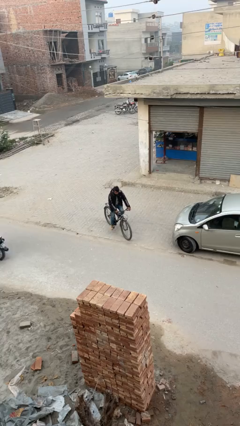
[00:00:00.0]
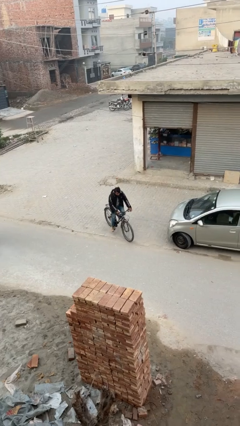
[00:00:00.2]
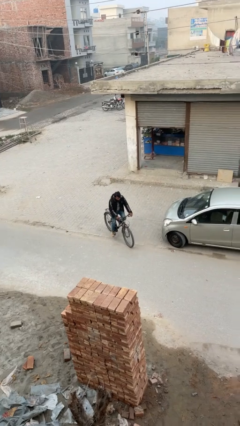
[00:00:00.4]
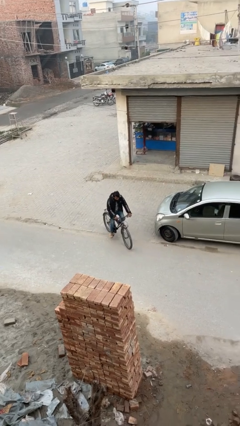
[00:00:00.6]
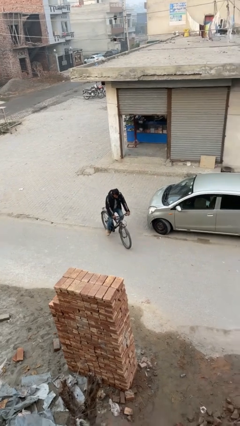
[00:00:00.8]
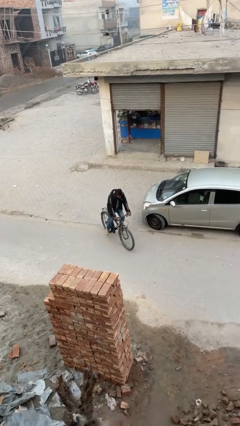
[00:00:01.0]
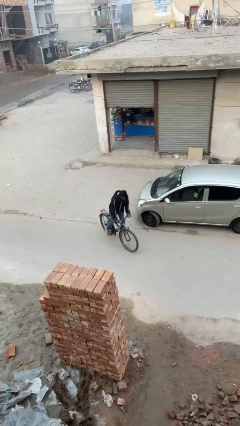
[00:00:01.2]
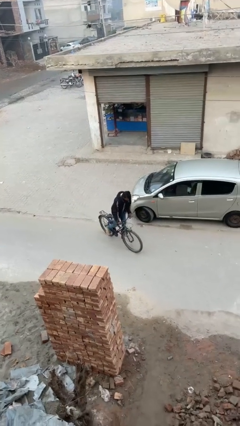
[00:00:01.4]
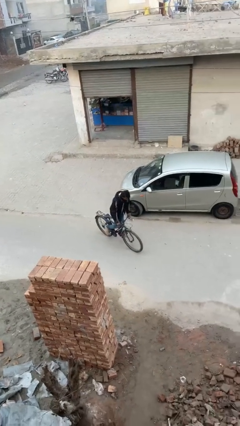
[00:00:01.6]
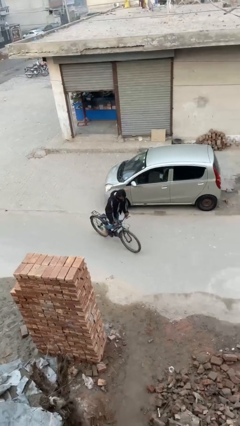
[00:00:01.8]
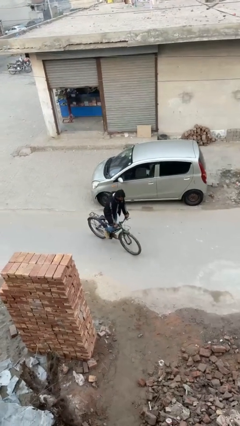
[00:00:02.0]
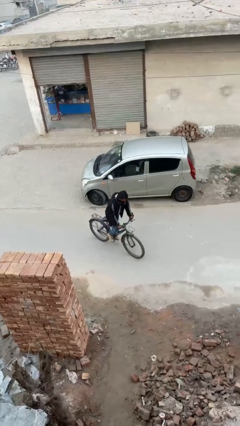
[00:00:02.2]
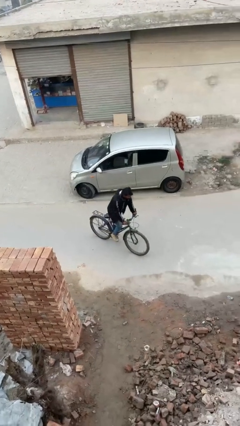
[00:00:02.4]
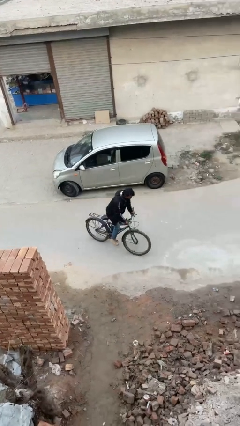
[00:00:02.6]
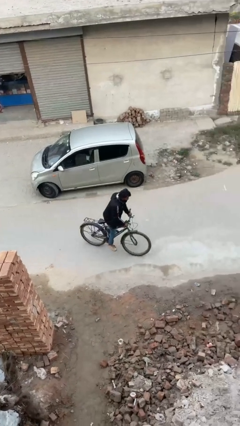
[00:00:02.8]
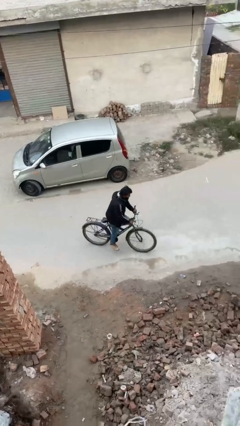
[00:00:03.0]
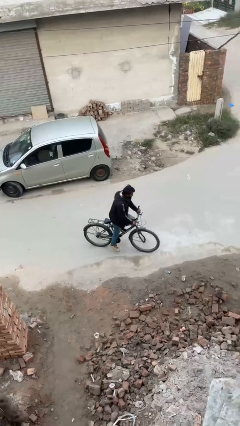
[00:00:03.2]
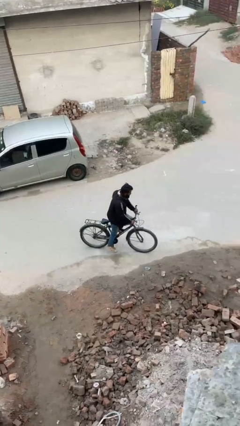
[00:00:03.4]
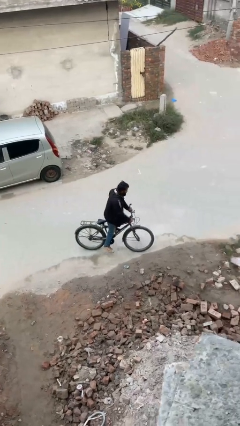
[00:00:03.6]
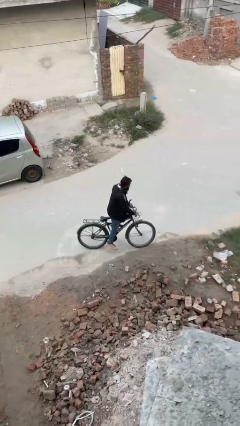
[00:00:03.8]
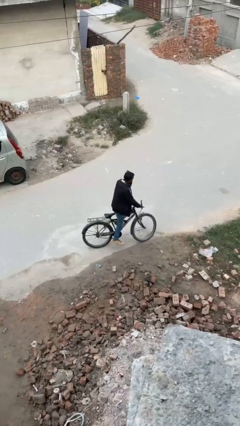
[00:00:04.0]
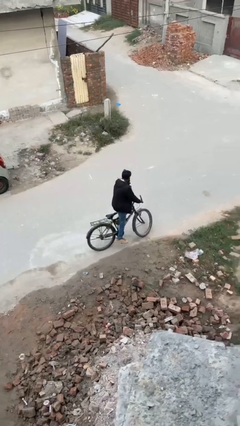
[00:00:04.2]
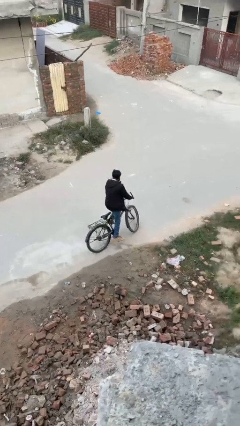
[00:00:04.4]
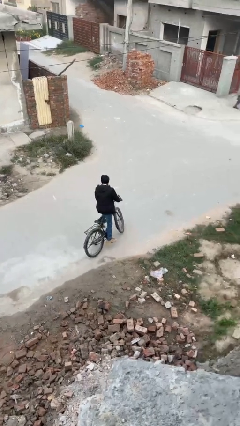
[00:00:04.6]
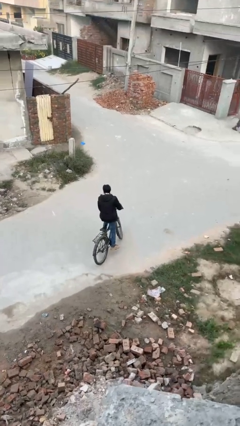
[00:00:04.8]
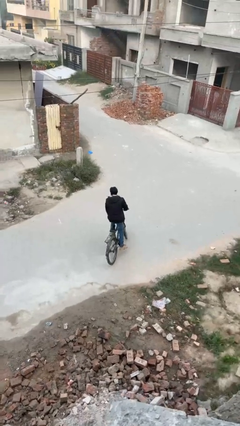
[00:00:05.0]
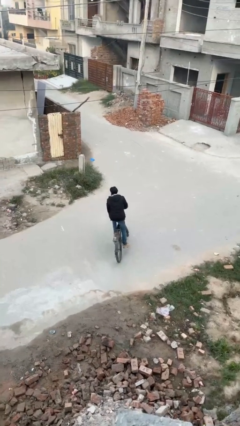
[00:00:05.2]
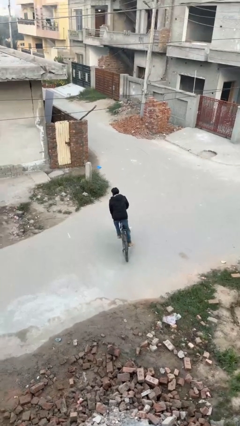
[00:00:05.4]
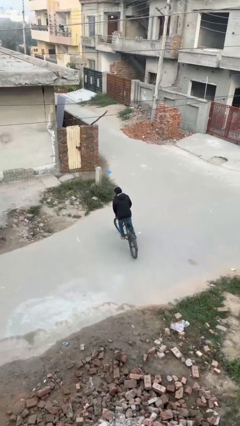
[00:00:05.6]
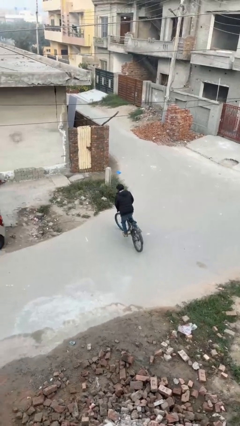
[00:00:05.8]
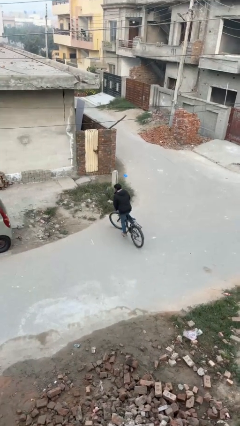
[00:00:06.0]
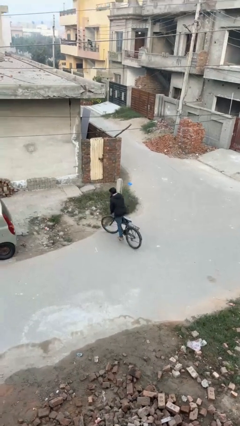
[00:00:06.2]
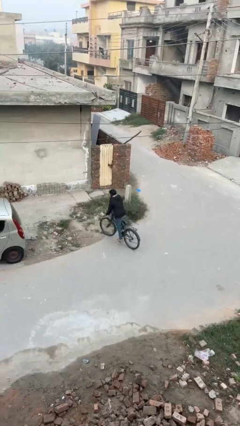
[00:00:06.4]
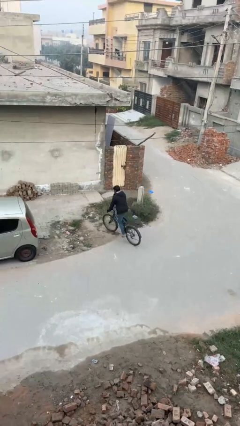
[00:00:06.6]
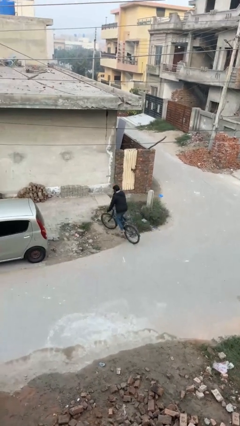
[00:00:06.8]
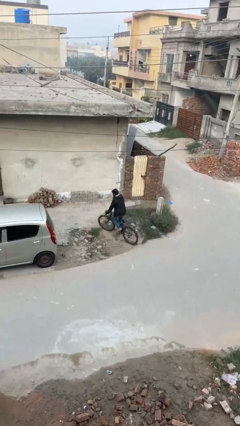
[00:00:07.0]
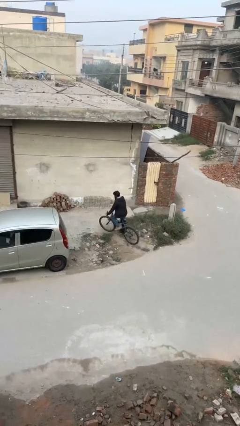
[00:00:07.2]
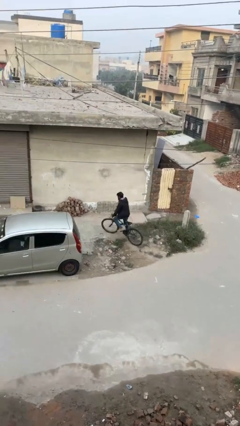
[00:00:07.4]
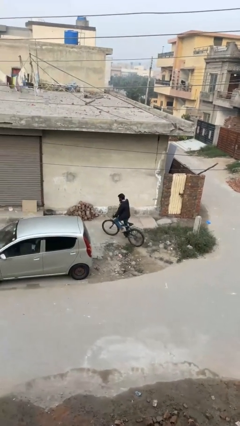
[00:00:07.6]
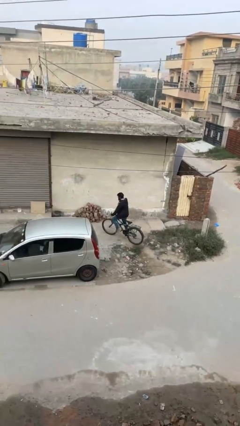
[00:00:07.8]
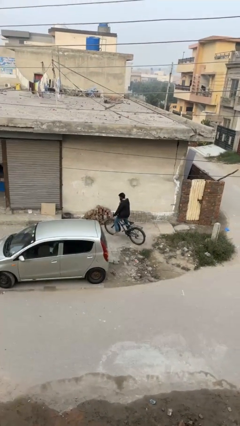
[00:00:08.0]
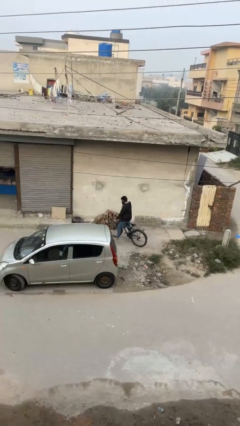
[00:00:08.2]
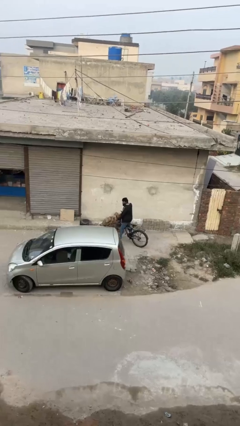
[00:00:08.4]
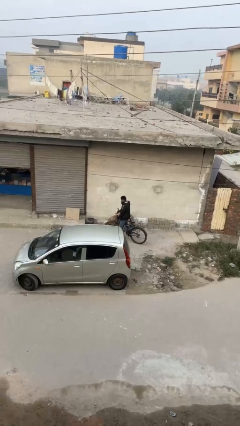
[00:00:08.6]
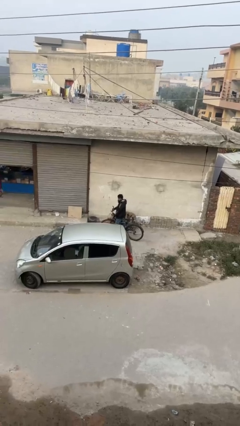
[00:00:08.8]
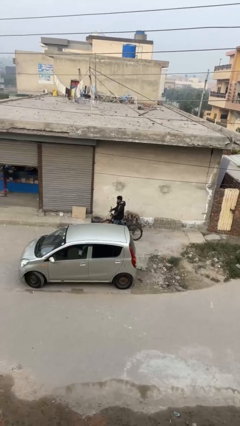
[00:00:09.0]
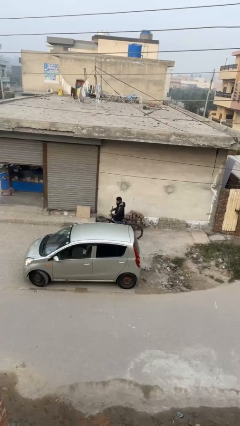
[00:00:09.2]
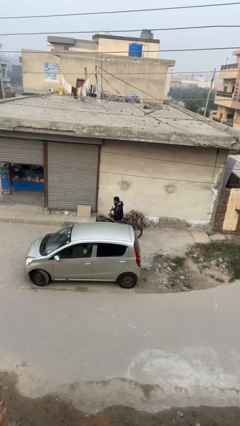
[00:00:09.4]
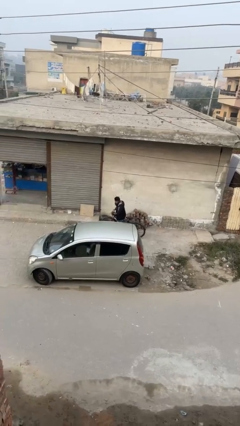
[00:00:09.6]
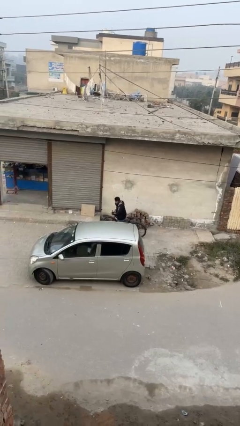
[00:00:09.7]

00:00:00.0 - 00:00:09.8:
person rides bicycle

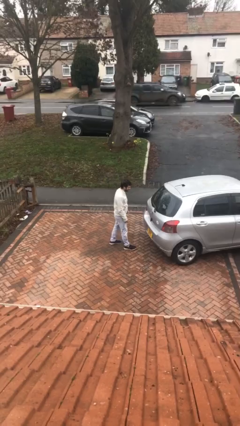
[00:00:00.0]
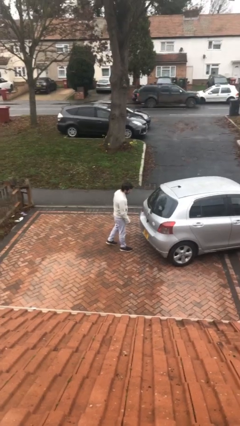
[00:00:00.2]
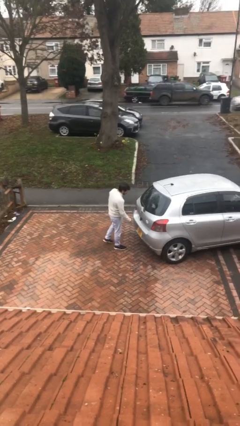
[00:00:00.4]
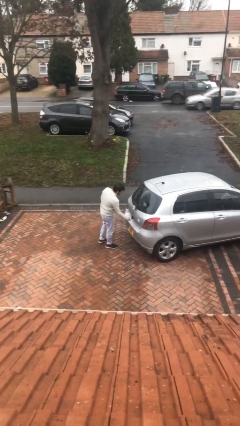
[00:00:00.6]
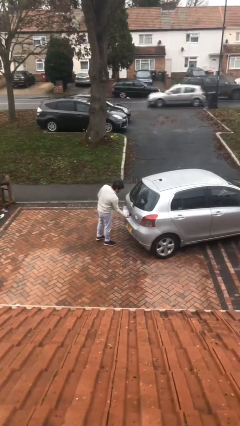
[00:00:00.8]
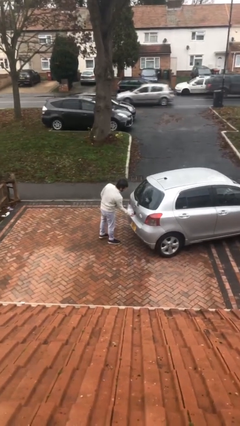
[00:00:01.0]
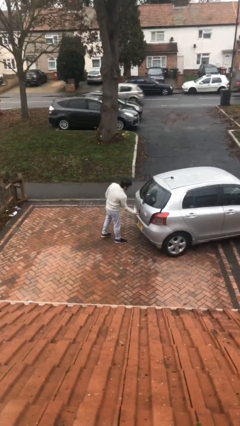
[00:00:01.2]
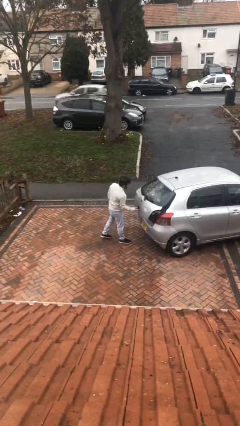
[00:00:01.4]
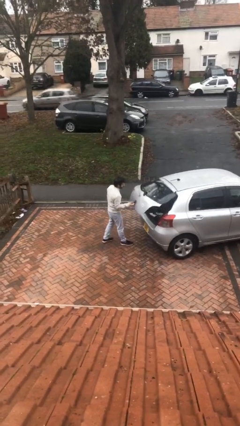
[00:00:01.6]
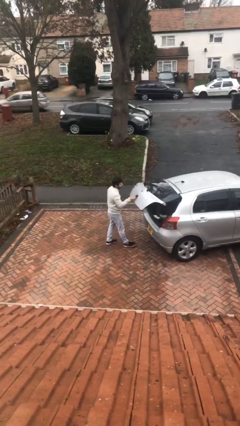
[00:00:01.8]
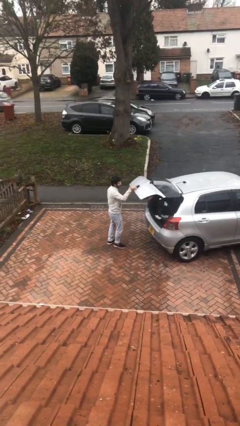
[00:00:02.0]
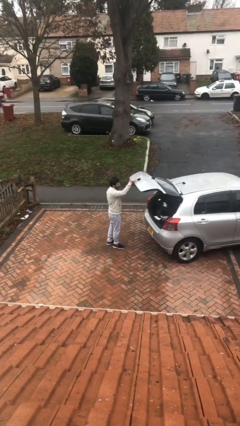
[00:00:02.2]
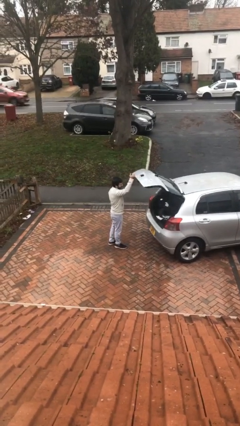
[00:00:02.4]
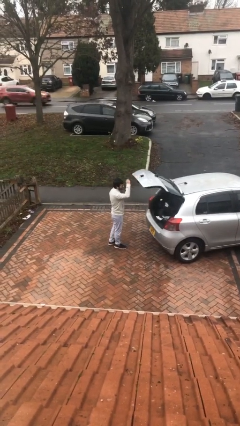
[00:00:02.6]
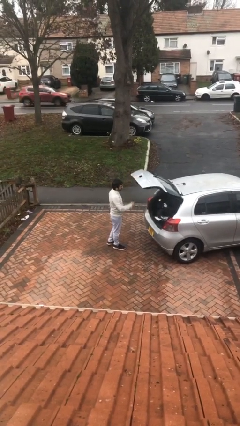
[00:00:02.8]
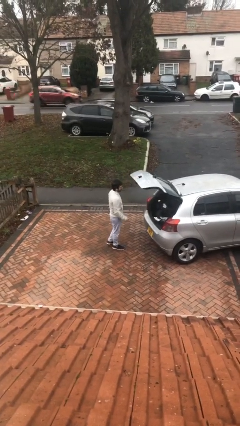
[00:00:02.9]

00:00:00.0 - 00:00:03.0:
person opens car trunk

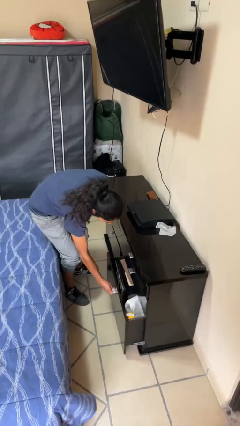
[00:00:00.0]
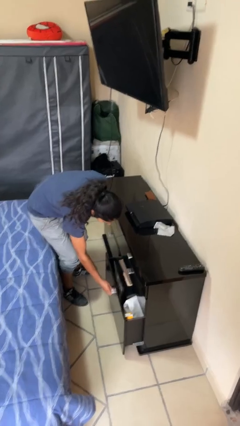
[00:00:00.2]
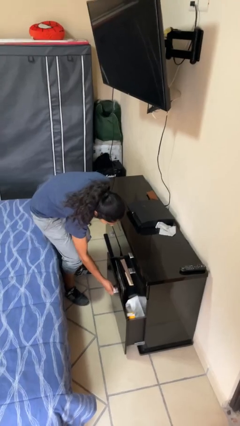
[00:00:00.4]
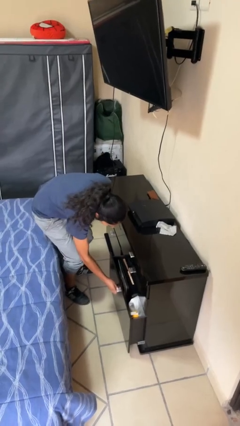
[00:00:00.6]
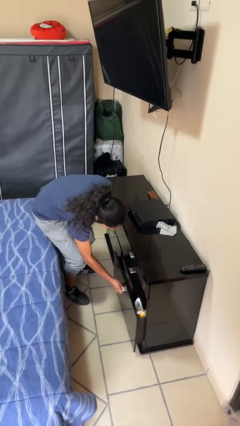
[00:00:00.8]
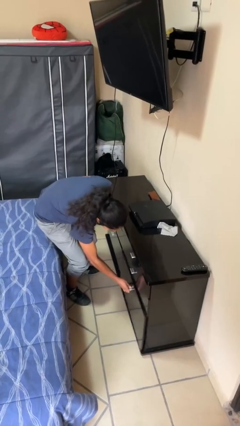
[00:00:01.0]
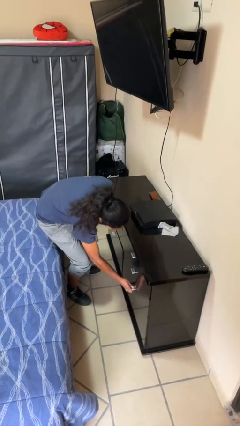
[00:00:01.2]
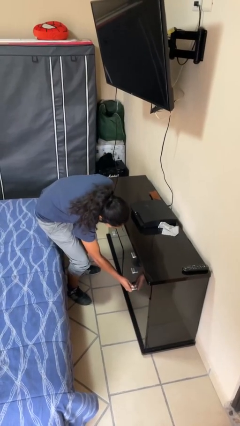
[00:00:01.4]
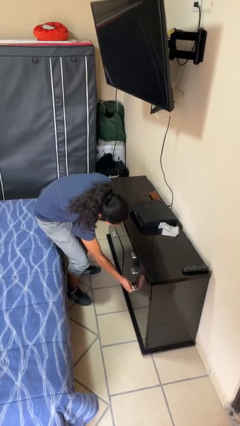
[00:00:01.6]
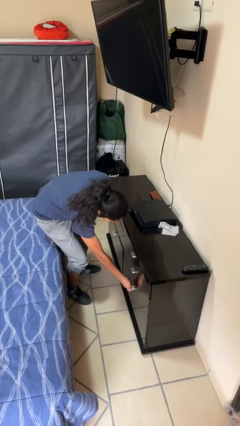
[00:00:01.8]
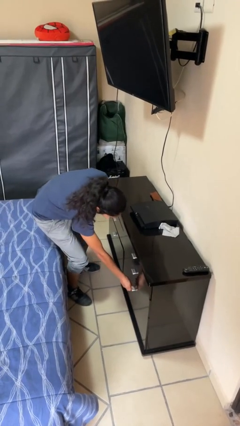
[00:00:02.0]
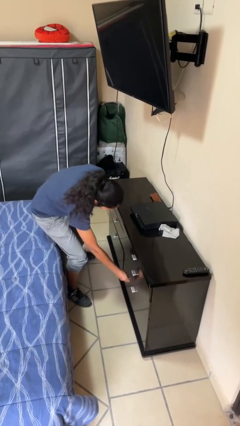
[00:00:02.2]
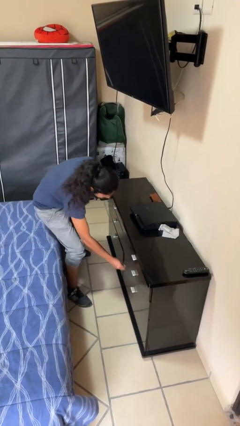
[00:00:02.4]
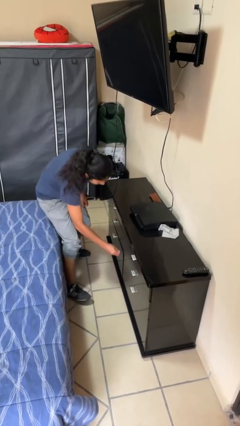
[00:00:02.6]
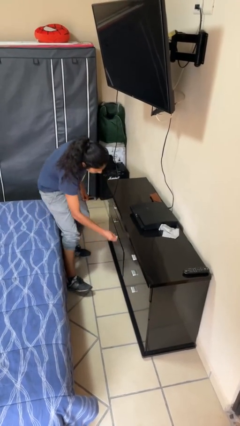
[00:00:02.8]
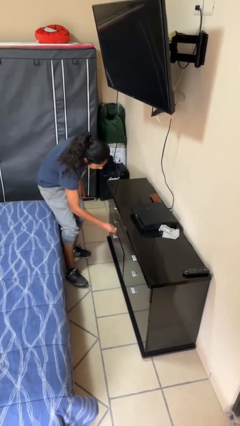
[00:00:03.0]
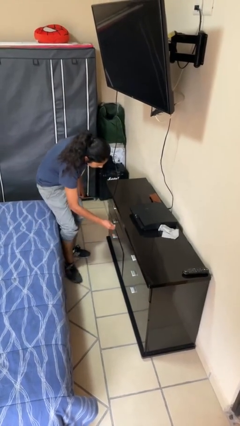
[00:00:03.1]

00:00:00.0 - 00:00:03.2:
person closes dresser drawer

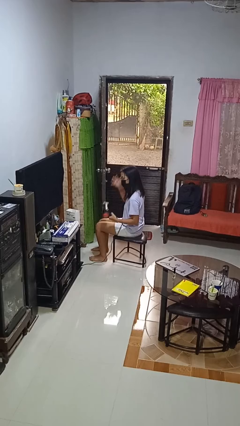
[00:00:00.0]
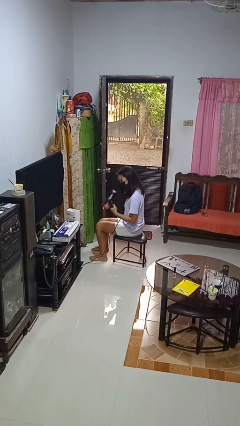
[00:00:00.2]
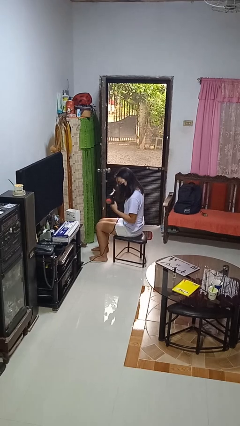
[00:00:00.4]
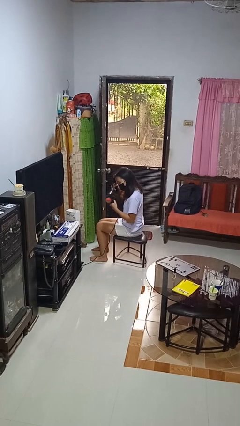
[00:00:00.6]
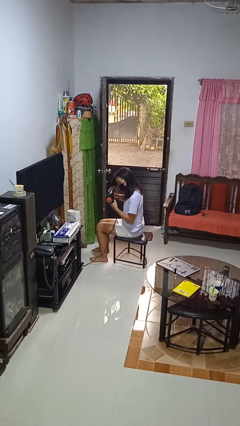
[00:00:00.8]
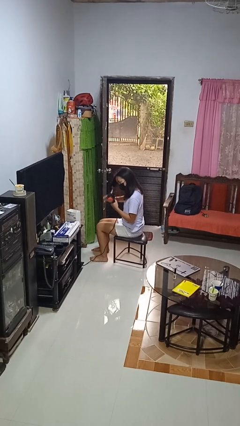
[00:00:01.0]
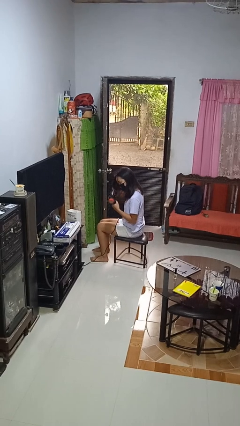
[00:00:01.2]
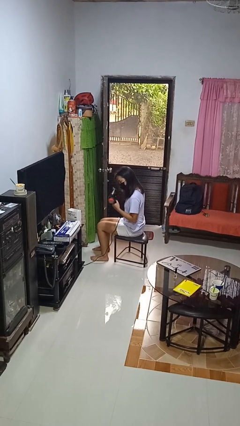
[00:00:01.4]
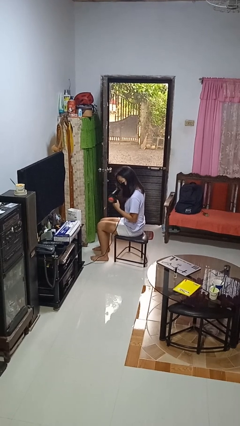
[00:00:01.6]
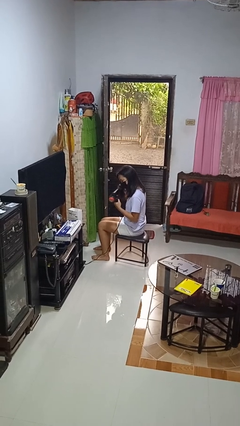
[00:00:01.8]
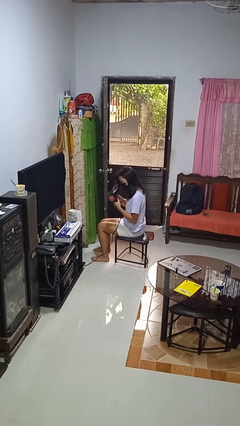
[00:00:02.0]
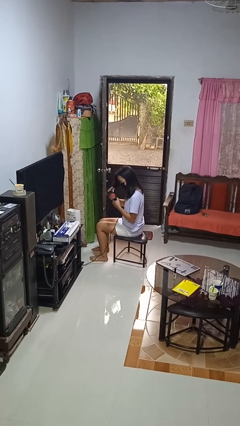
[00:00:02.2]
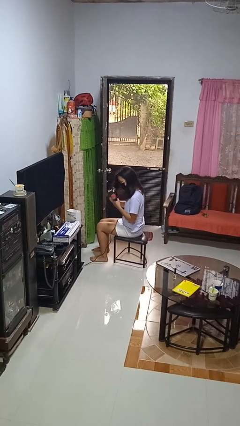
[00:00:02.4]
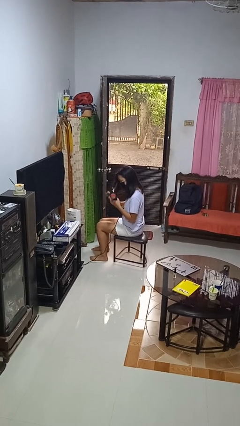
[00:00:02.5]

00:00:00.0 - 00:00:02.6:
person dries hair with hairdryer
